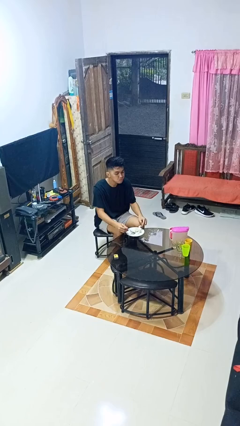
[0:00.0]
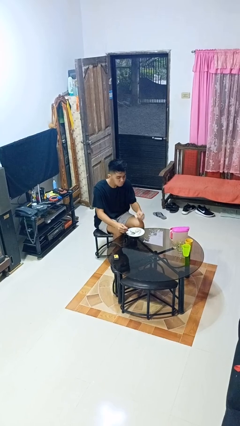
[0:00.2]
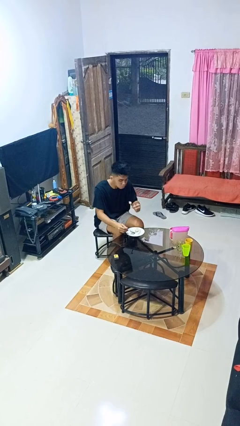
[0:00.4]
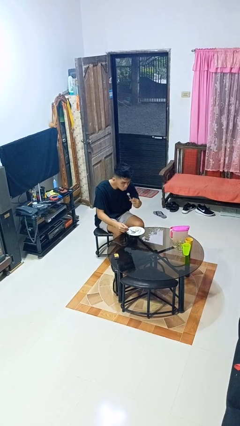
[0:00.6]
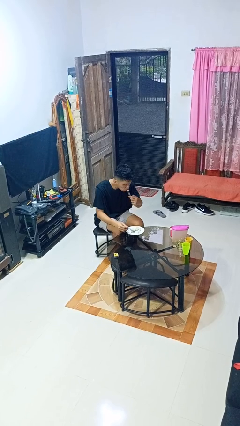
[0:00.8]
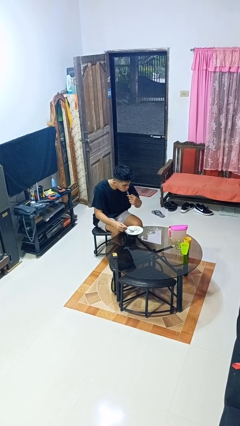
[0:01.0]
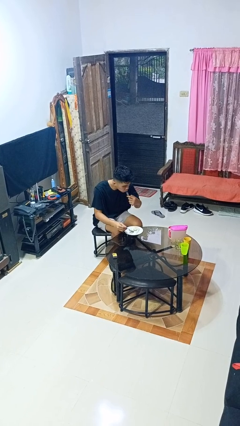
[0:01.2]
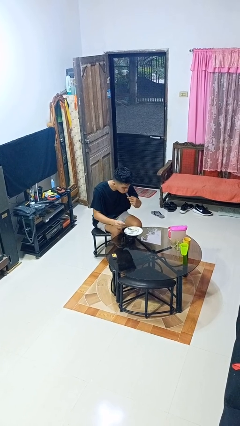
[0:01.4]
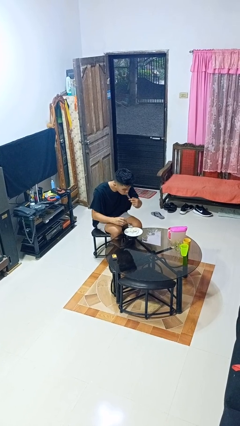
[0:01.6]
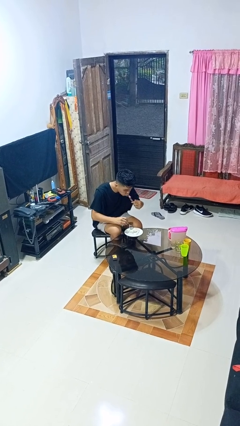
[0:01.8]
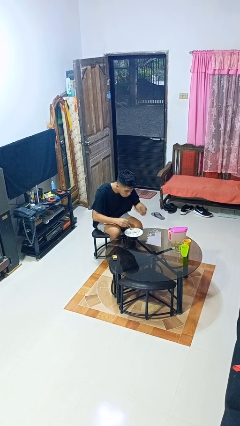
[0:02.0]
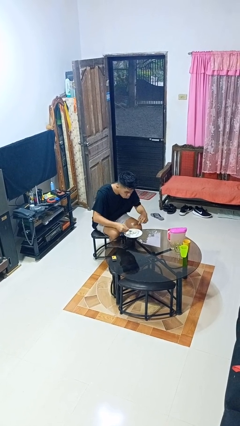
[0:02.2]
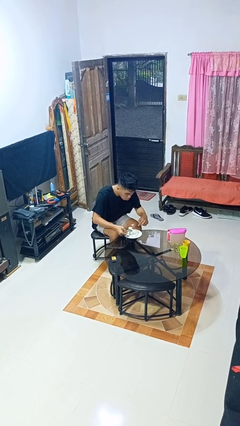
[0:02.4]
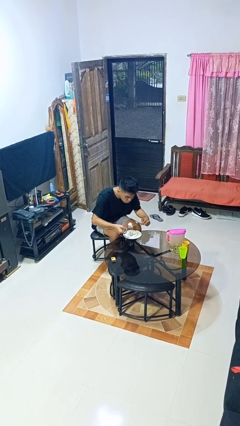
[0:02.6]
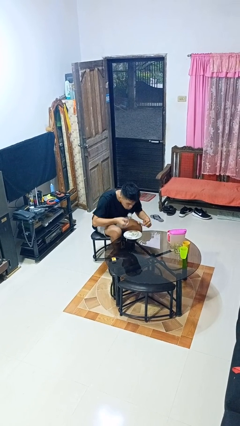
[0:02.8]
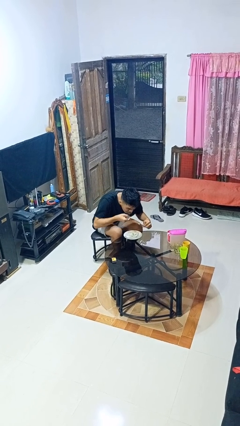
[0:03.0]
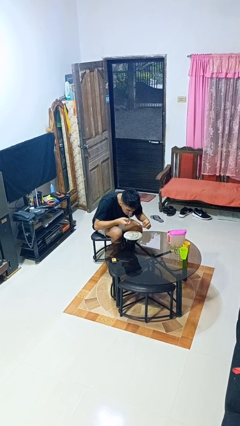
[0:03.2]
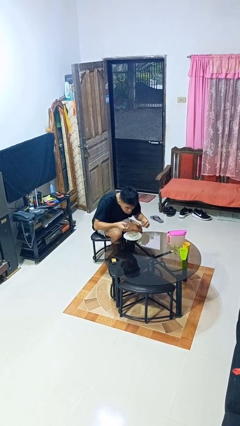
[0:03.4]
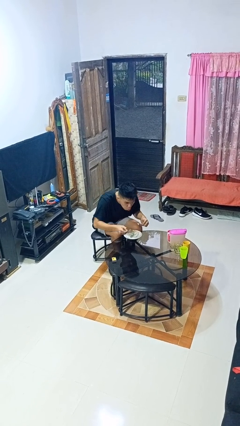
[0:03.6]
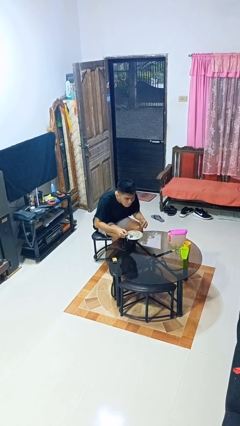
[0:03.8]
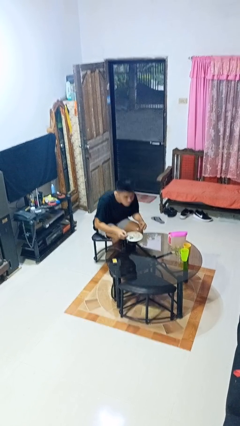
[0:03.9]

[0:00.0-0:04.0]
person eats with utensil

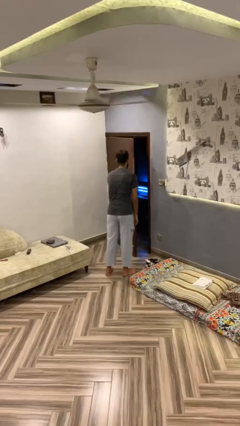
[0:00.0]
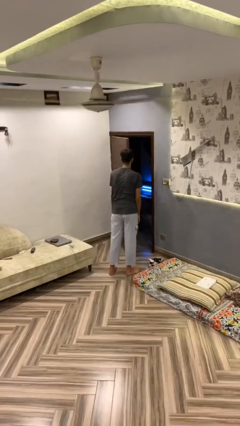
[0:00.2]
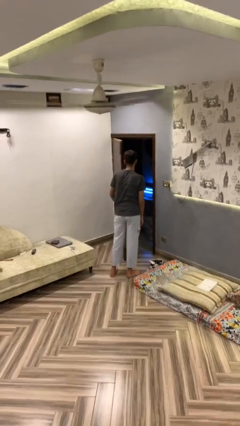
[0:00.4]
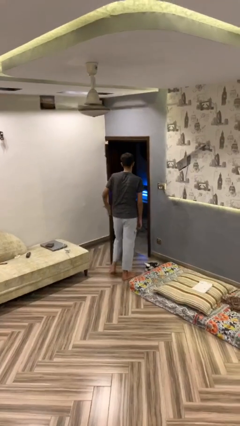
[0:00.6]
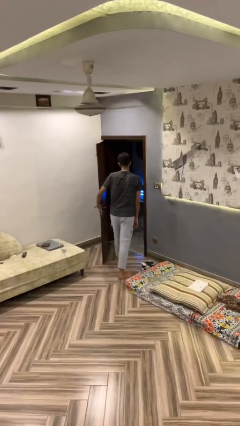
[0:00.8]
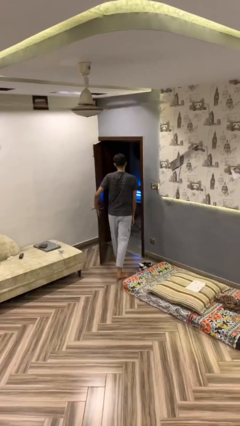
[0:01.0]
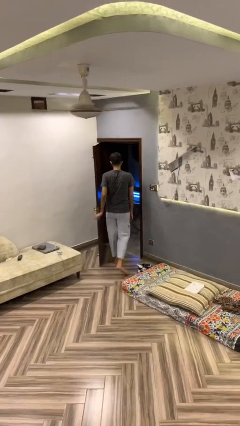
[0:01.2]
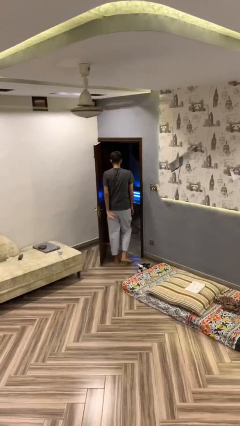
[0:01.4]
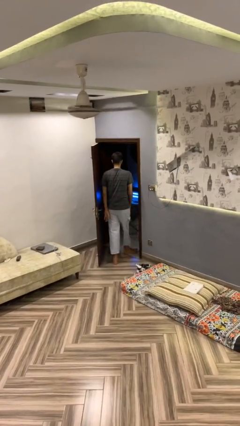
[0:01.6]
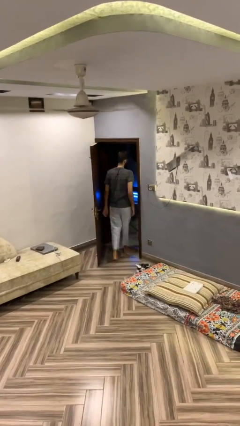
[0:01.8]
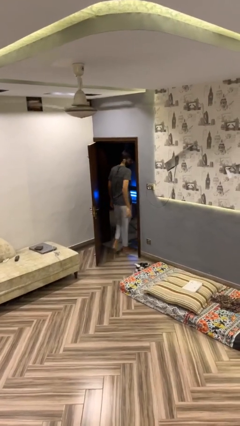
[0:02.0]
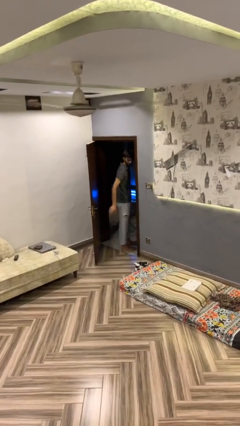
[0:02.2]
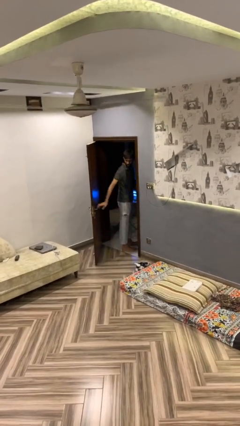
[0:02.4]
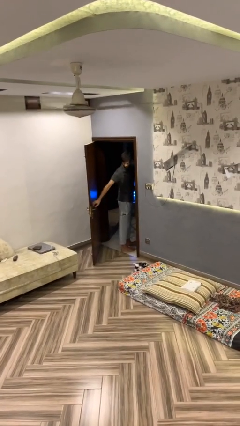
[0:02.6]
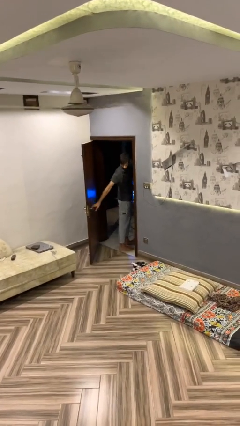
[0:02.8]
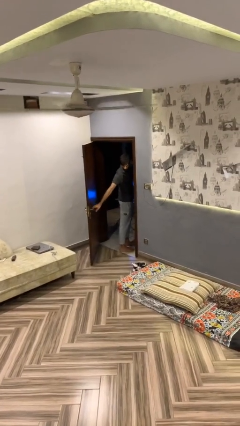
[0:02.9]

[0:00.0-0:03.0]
person exits scene through structure

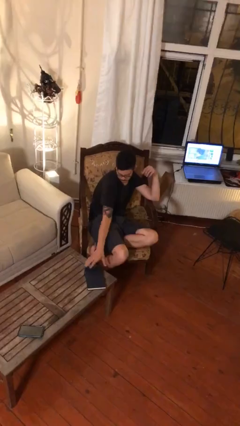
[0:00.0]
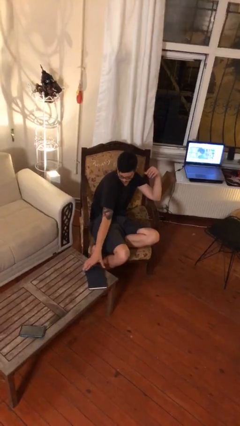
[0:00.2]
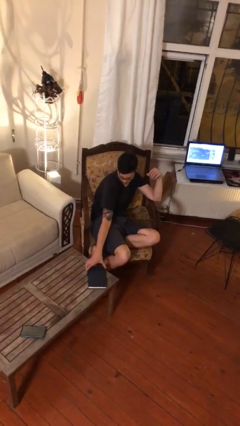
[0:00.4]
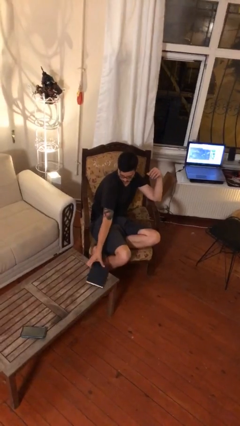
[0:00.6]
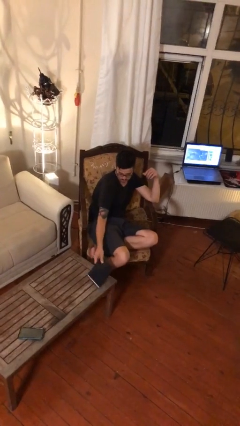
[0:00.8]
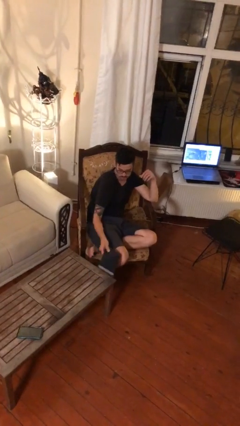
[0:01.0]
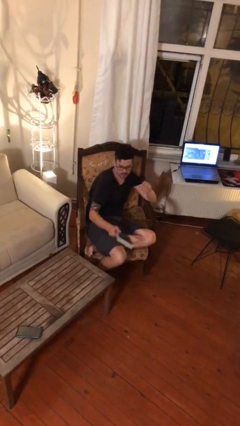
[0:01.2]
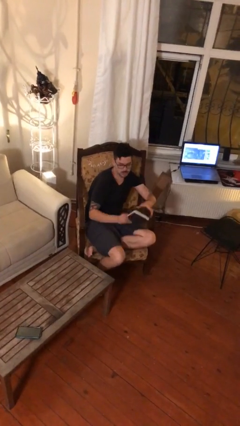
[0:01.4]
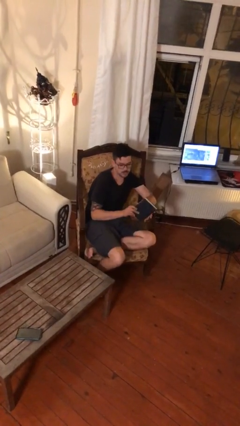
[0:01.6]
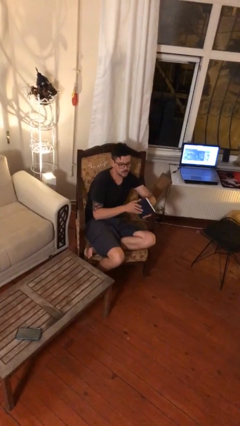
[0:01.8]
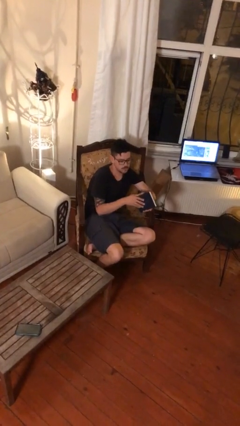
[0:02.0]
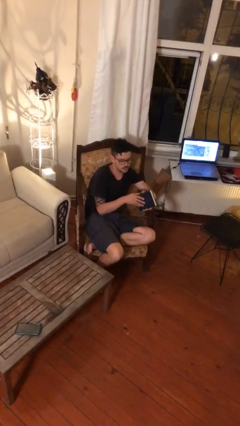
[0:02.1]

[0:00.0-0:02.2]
person picks up object from table

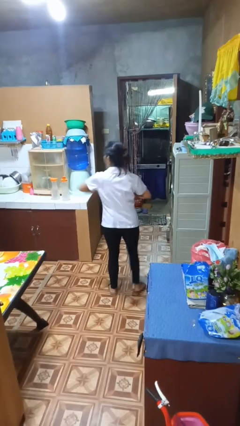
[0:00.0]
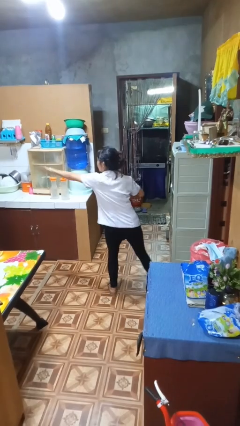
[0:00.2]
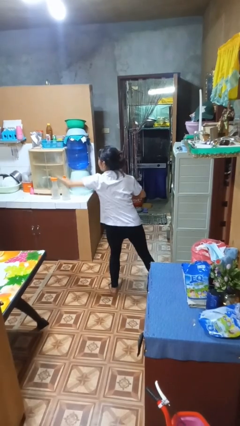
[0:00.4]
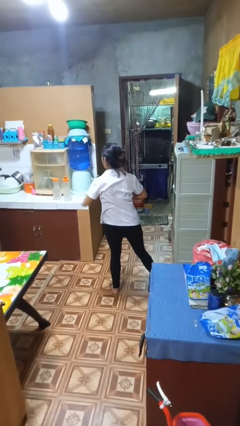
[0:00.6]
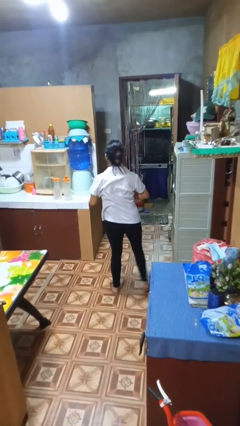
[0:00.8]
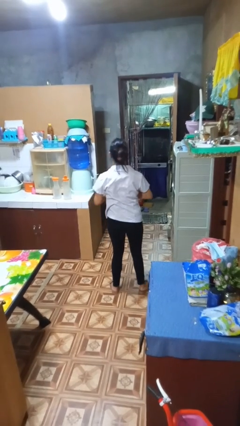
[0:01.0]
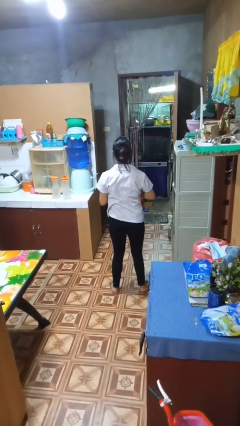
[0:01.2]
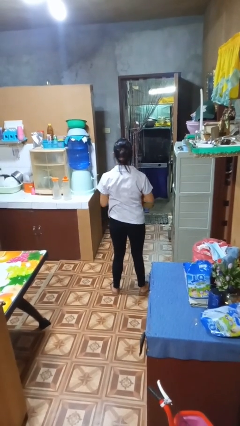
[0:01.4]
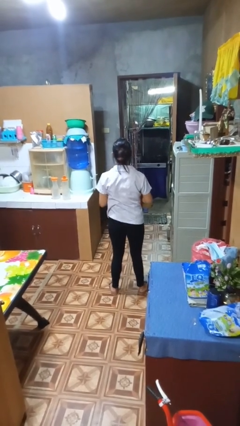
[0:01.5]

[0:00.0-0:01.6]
person karate chop

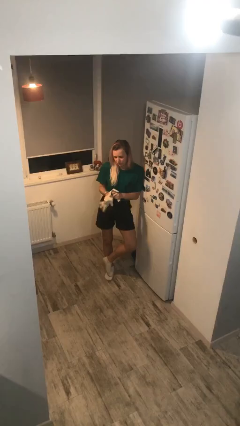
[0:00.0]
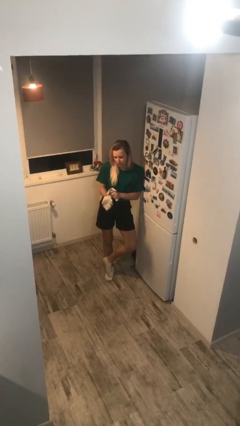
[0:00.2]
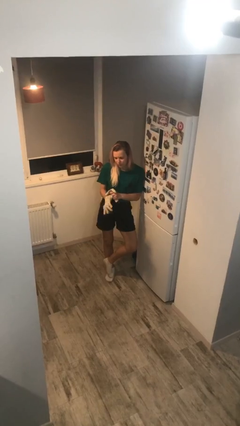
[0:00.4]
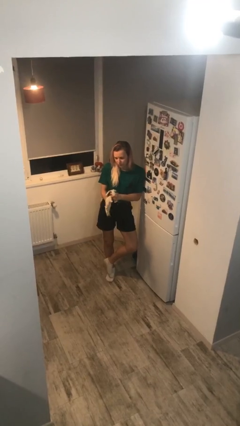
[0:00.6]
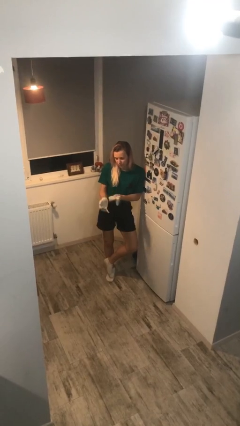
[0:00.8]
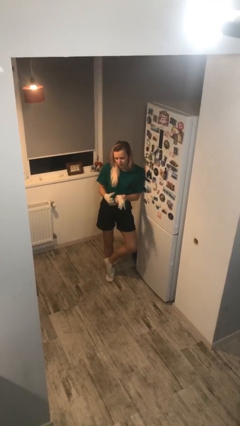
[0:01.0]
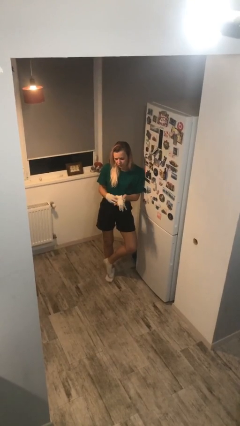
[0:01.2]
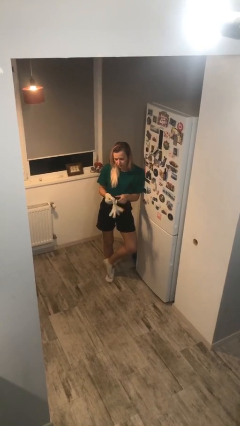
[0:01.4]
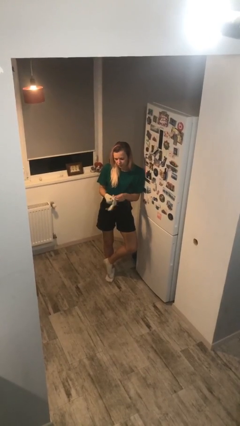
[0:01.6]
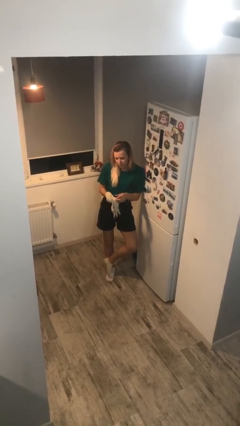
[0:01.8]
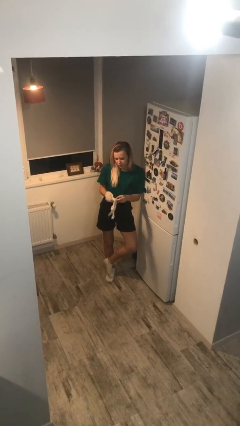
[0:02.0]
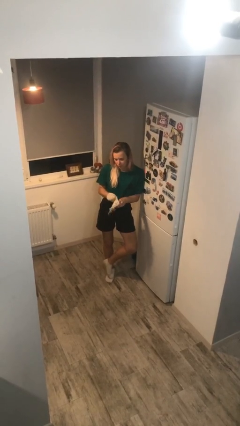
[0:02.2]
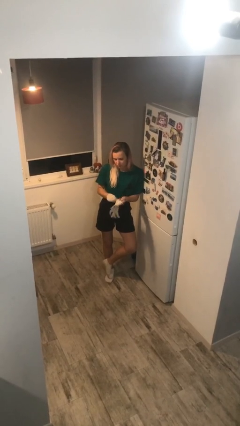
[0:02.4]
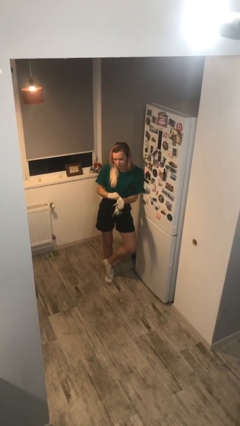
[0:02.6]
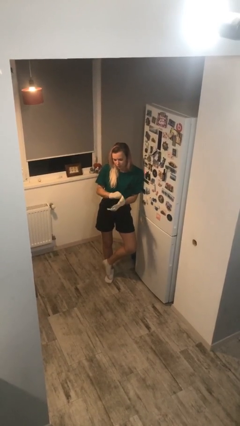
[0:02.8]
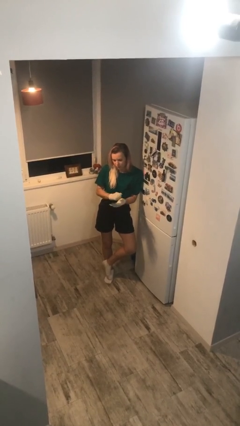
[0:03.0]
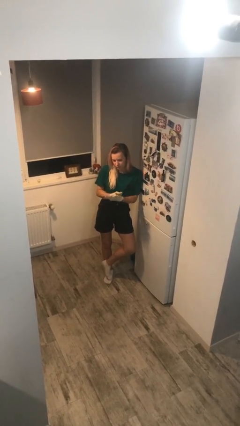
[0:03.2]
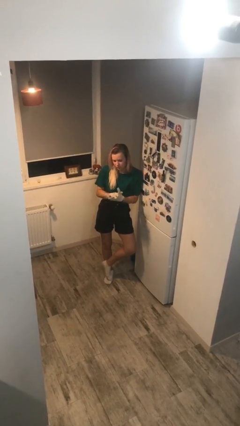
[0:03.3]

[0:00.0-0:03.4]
person puts on gloves

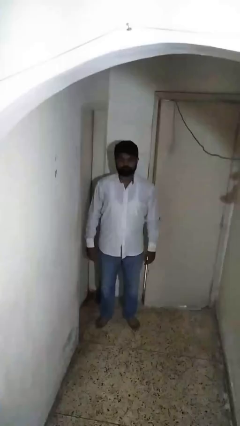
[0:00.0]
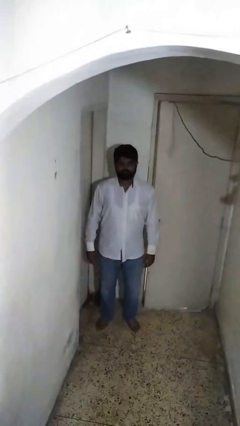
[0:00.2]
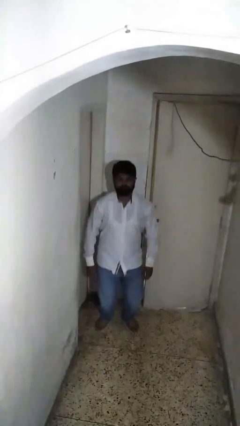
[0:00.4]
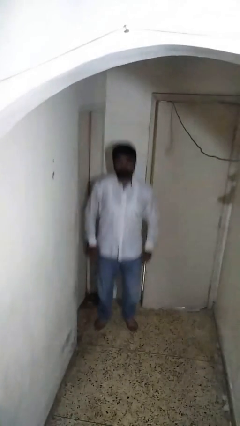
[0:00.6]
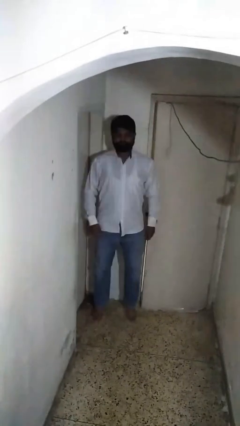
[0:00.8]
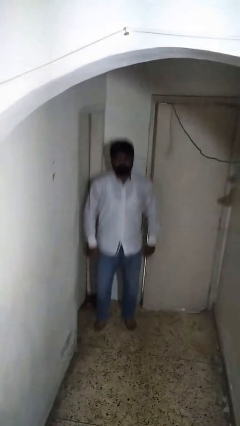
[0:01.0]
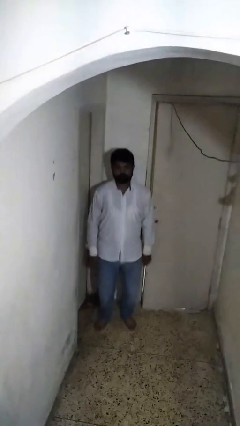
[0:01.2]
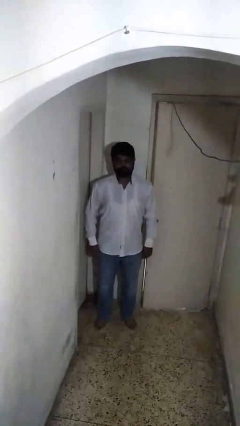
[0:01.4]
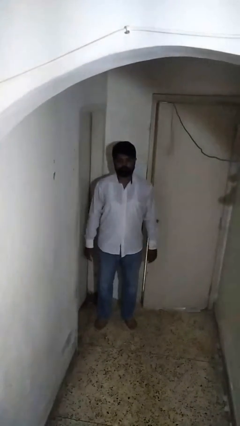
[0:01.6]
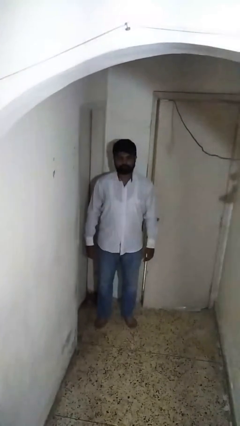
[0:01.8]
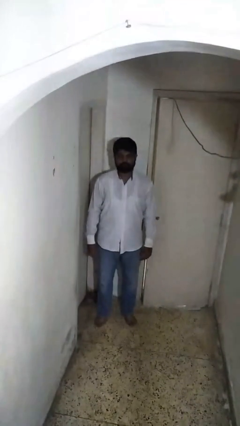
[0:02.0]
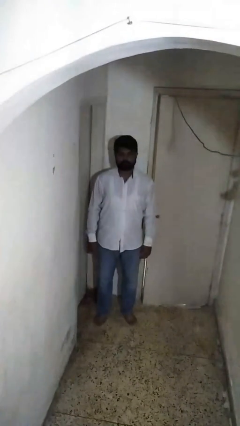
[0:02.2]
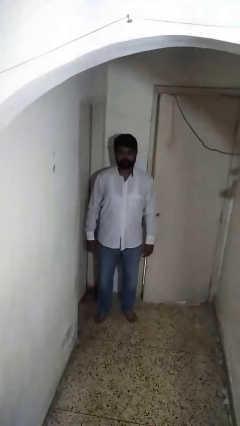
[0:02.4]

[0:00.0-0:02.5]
person jumps
